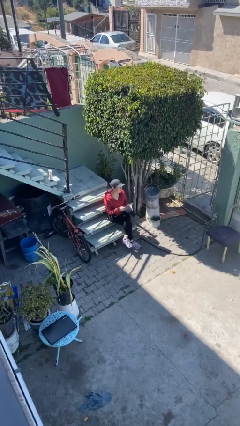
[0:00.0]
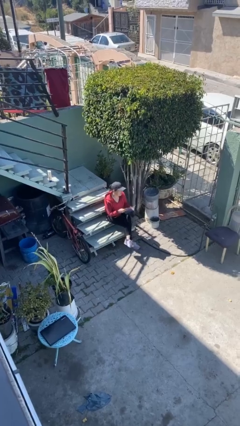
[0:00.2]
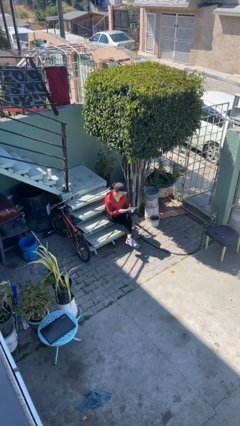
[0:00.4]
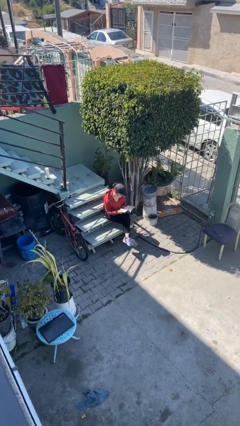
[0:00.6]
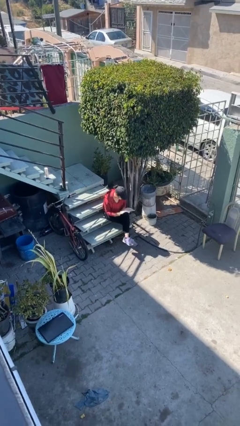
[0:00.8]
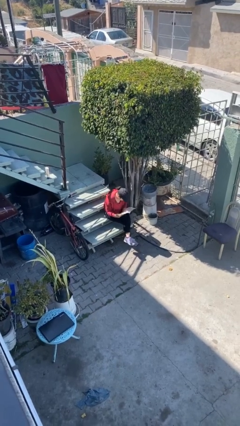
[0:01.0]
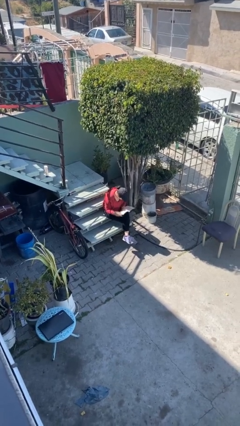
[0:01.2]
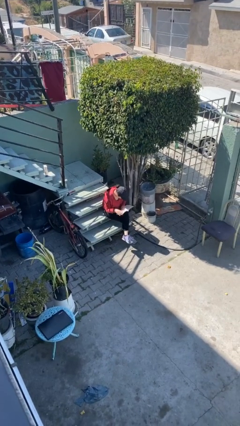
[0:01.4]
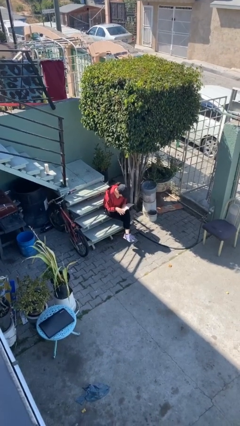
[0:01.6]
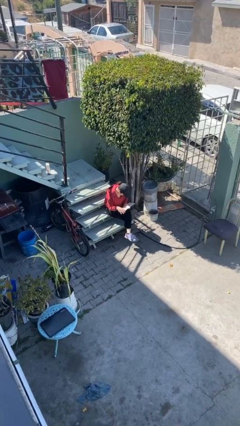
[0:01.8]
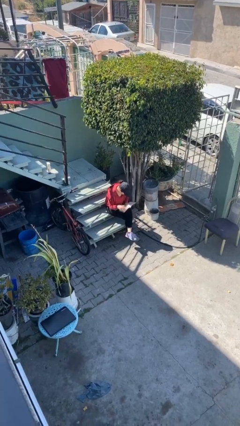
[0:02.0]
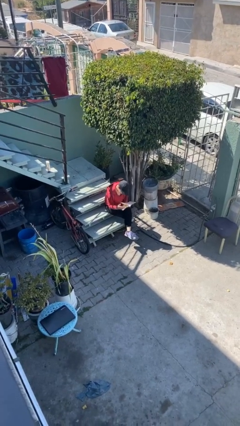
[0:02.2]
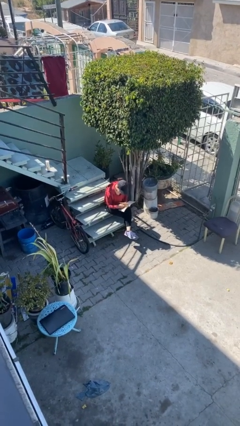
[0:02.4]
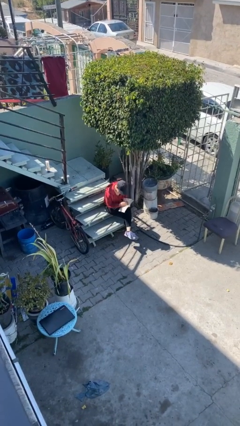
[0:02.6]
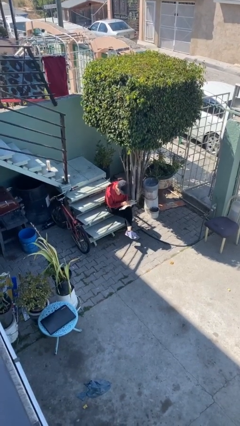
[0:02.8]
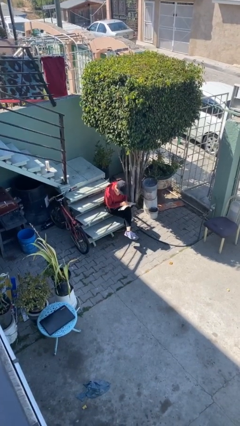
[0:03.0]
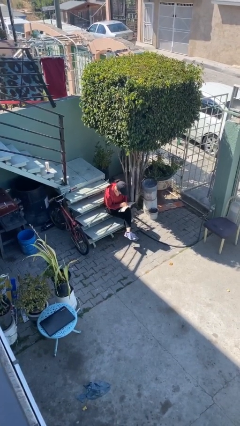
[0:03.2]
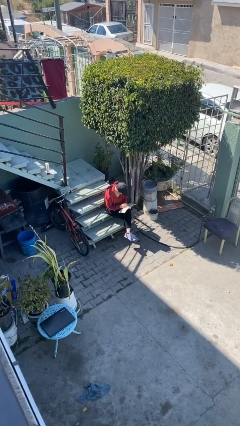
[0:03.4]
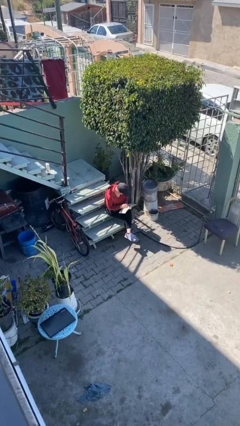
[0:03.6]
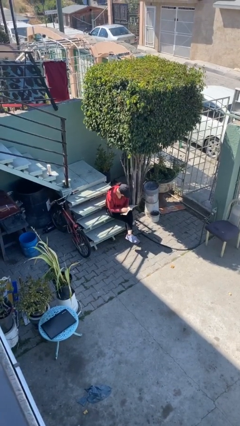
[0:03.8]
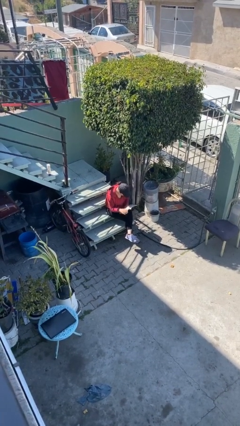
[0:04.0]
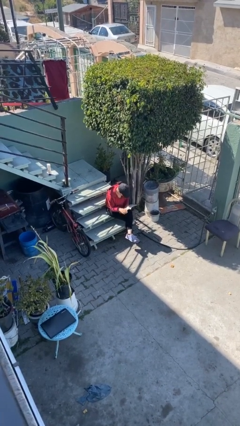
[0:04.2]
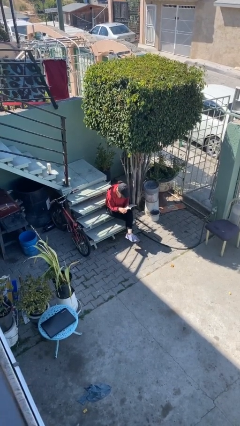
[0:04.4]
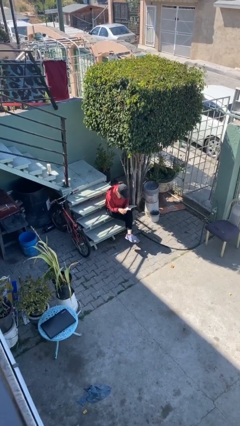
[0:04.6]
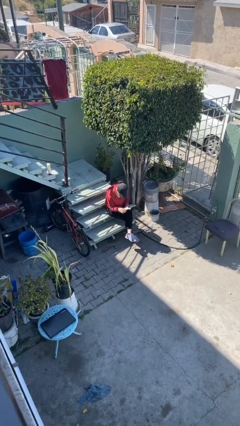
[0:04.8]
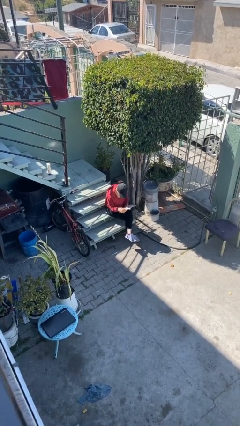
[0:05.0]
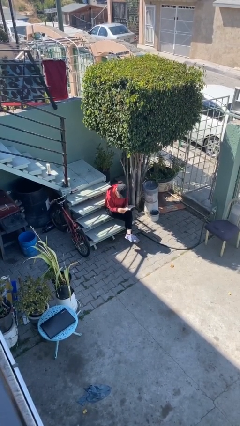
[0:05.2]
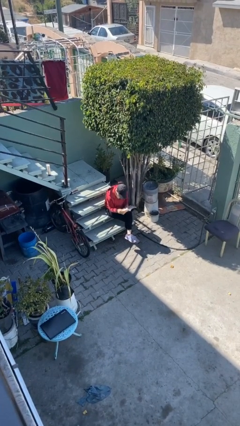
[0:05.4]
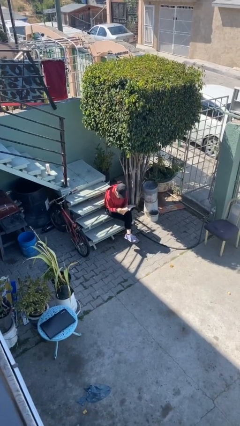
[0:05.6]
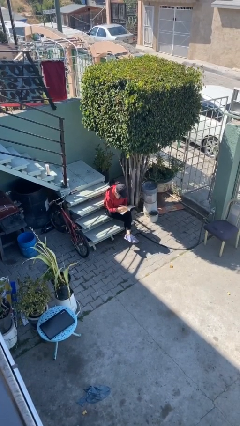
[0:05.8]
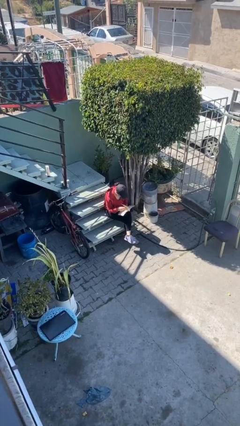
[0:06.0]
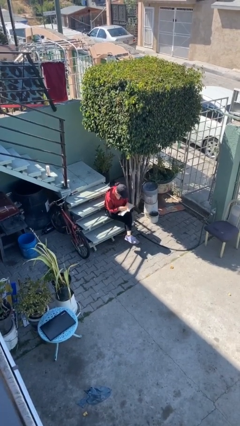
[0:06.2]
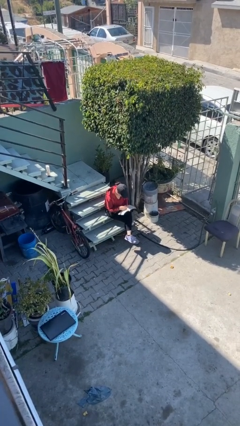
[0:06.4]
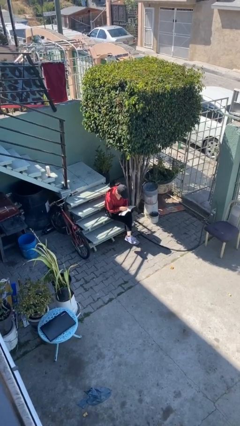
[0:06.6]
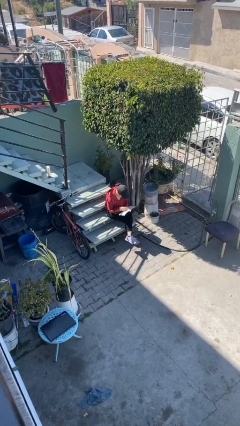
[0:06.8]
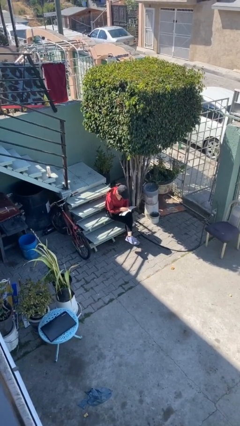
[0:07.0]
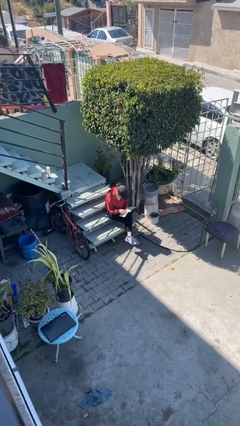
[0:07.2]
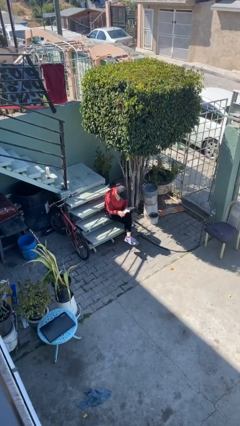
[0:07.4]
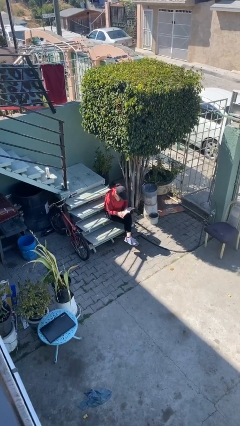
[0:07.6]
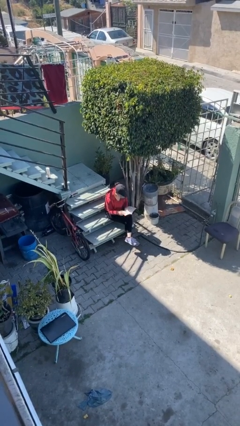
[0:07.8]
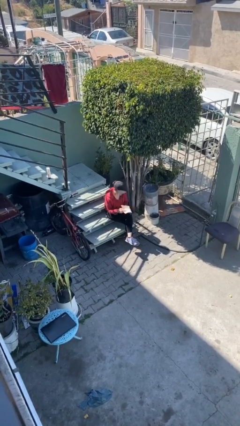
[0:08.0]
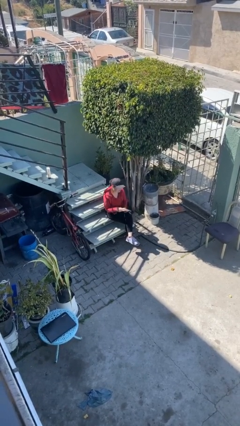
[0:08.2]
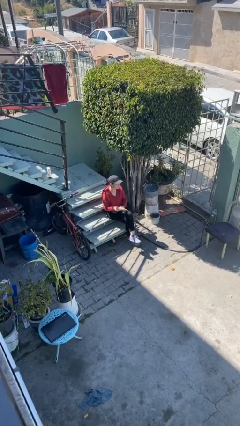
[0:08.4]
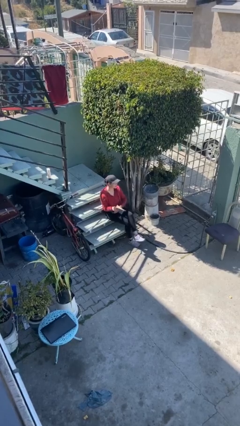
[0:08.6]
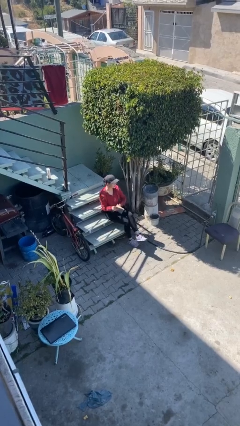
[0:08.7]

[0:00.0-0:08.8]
person reads document

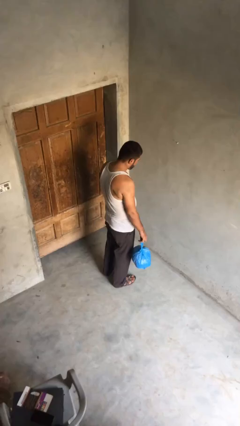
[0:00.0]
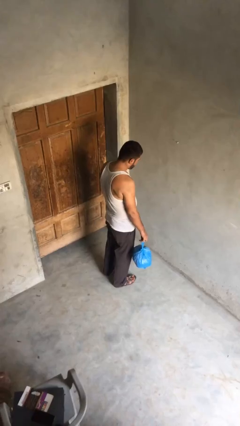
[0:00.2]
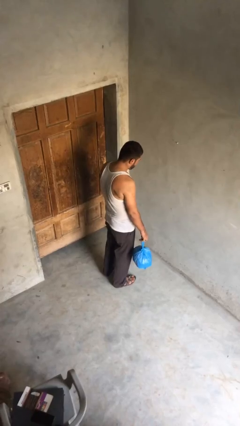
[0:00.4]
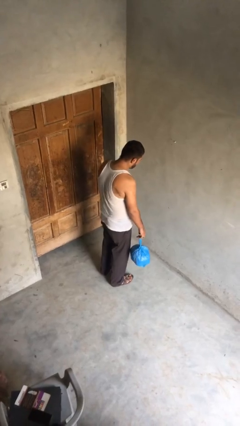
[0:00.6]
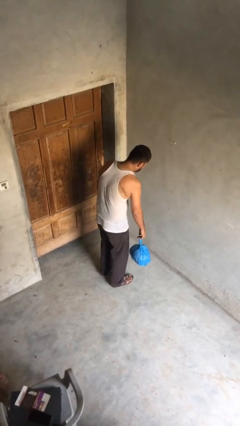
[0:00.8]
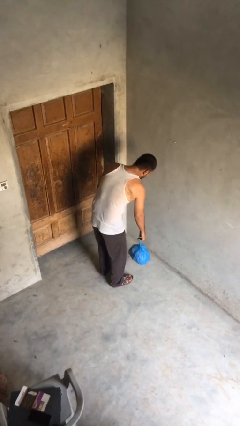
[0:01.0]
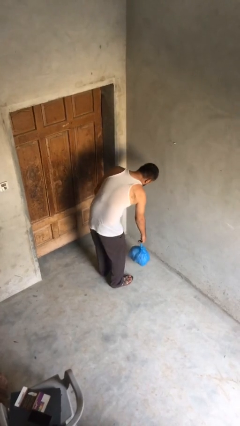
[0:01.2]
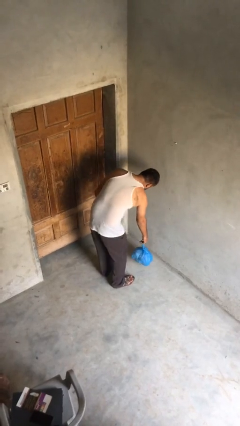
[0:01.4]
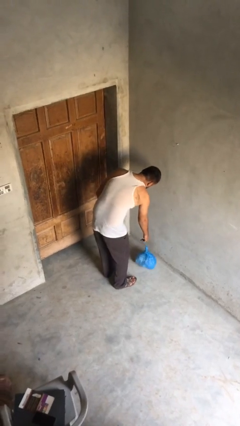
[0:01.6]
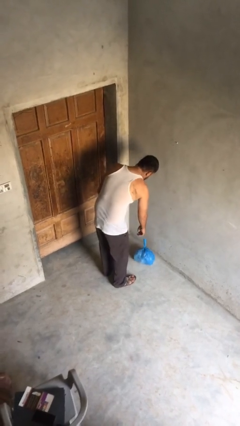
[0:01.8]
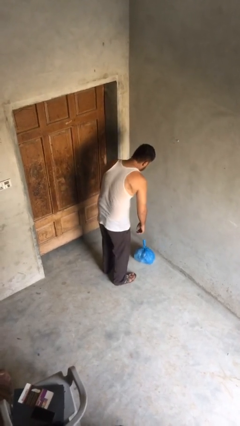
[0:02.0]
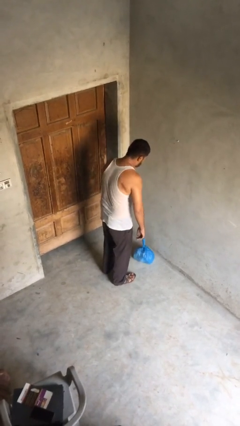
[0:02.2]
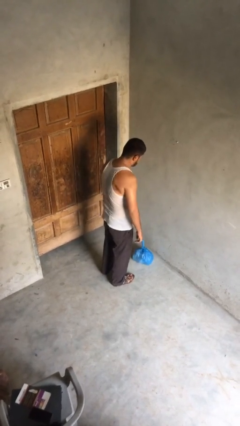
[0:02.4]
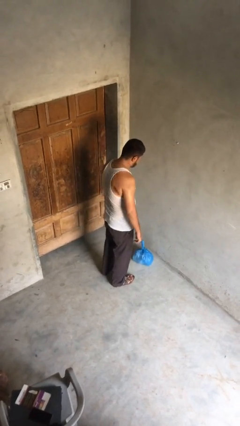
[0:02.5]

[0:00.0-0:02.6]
person puts down object on floor

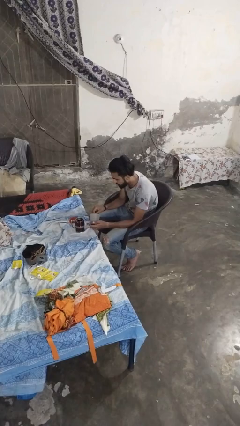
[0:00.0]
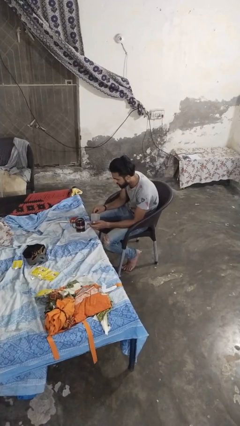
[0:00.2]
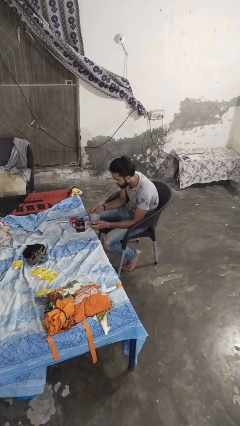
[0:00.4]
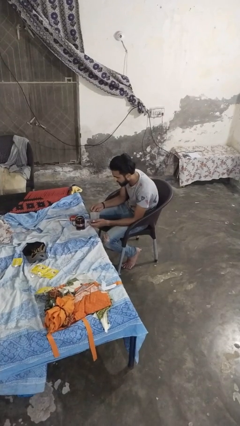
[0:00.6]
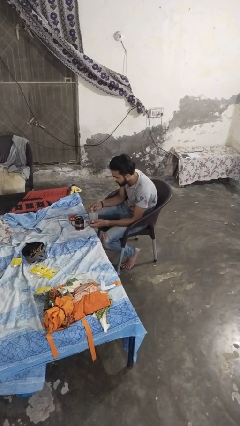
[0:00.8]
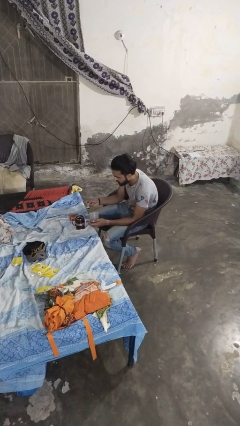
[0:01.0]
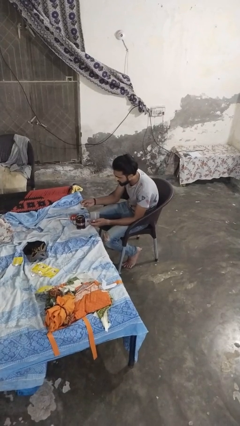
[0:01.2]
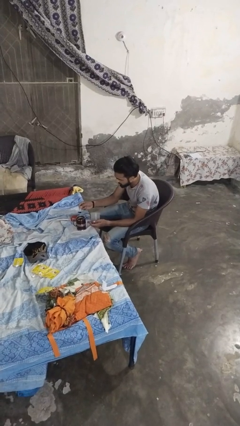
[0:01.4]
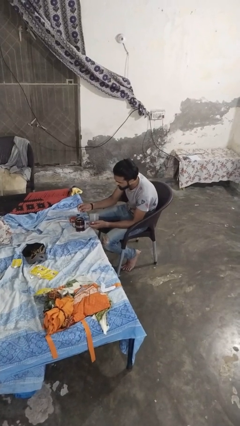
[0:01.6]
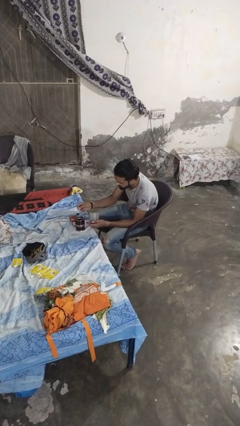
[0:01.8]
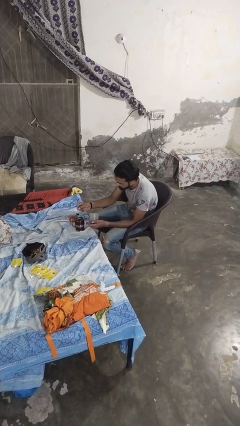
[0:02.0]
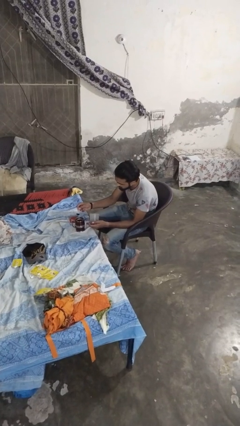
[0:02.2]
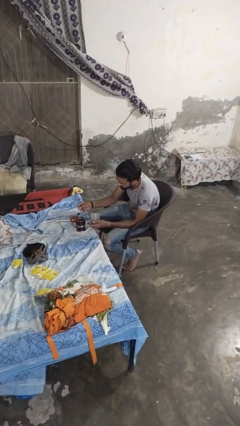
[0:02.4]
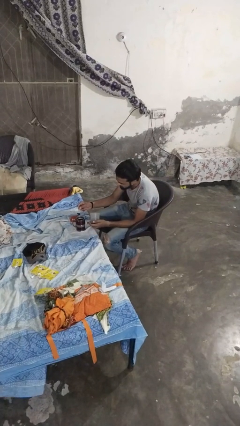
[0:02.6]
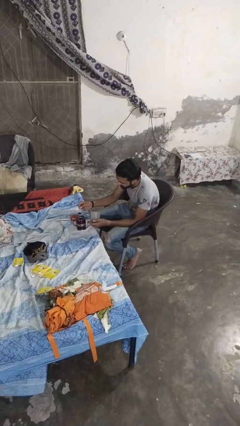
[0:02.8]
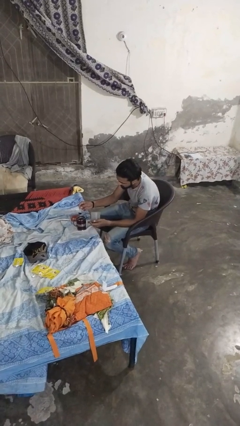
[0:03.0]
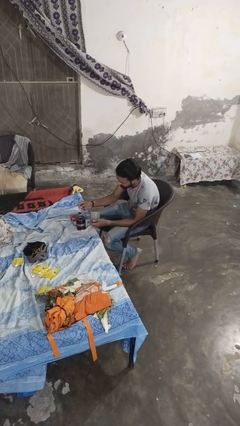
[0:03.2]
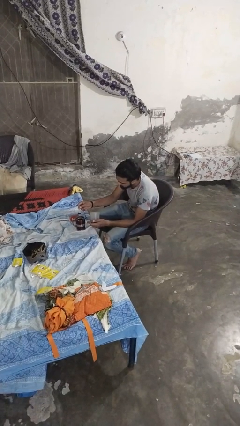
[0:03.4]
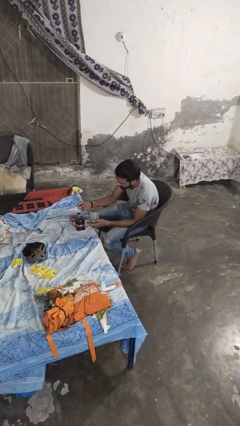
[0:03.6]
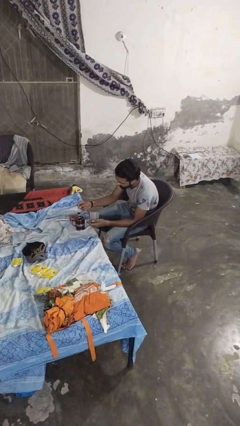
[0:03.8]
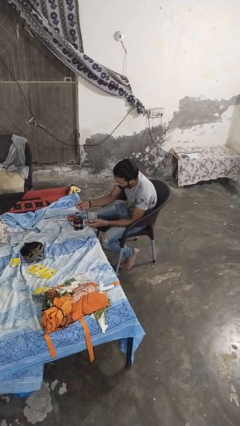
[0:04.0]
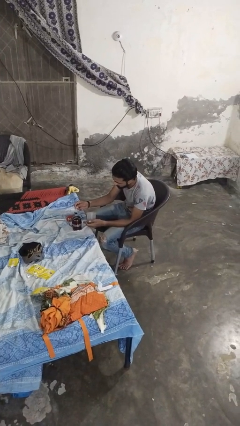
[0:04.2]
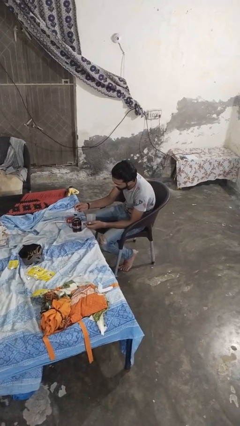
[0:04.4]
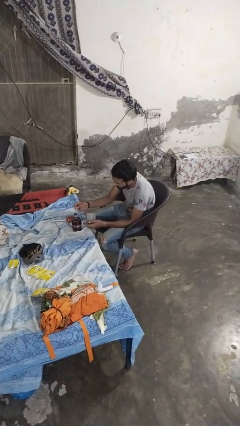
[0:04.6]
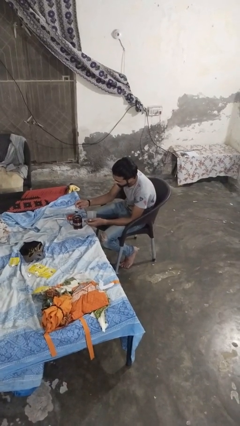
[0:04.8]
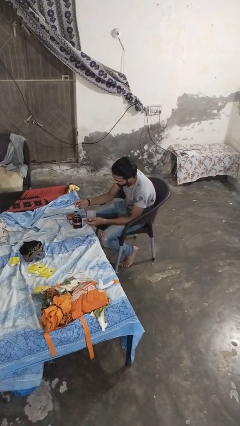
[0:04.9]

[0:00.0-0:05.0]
person pours coffee into mug

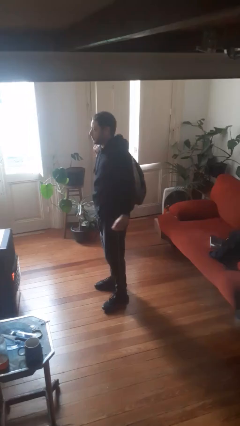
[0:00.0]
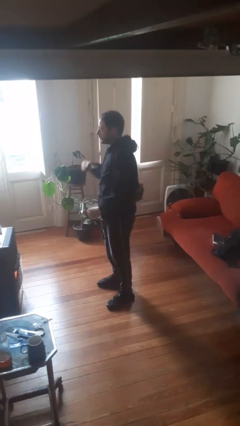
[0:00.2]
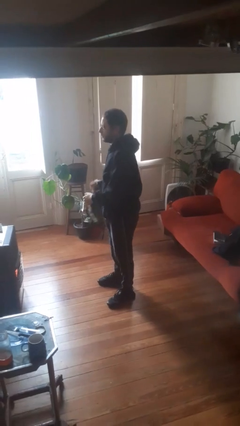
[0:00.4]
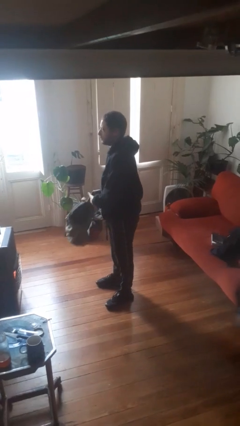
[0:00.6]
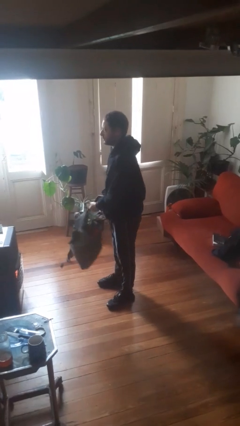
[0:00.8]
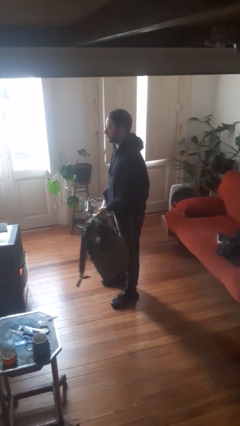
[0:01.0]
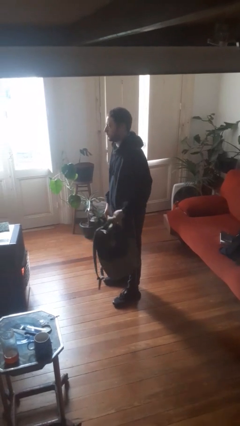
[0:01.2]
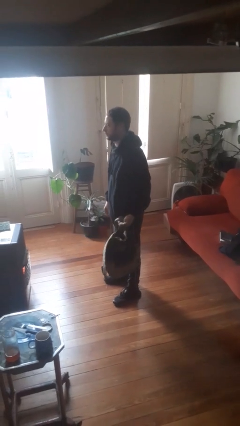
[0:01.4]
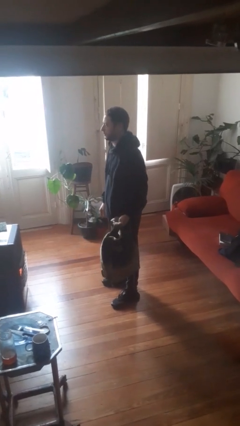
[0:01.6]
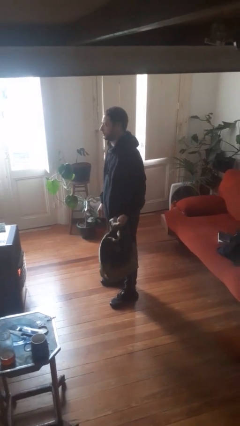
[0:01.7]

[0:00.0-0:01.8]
person takes off backpack
